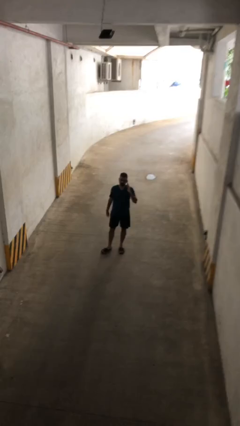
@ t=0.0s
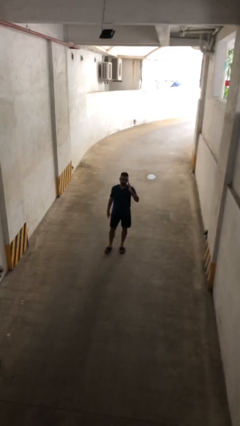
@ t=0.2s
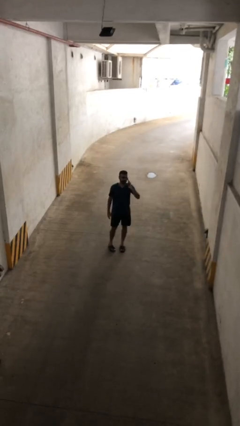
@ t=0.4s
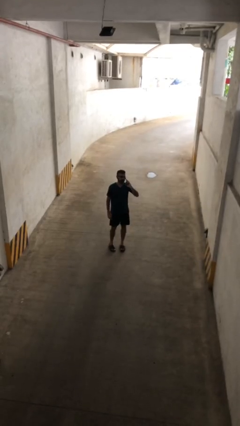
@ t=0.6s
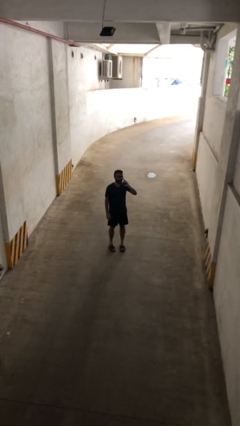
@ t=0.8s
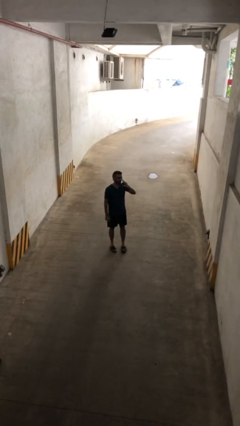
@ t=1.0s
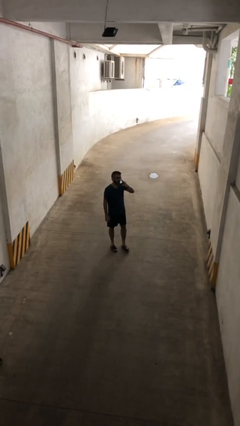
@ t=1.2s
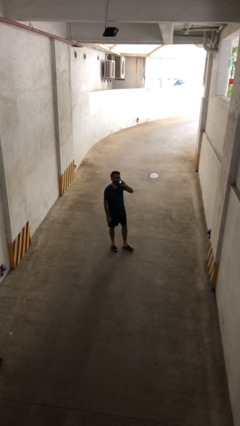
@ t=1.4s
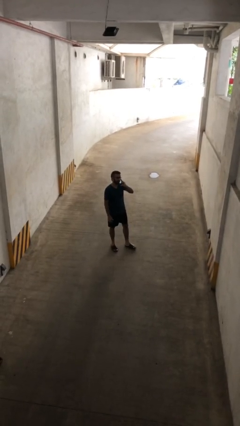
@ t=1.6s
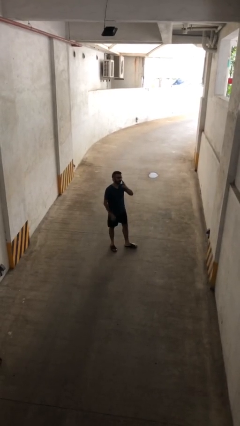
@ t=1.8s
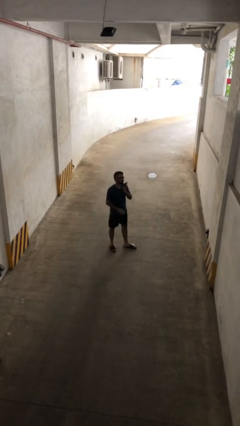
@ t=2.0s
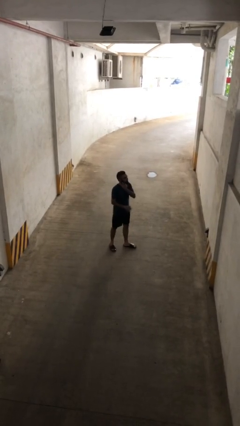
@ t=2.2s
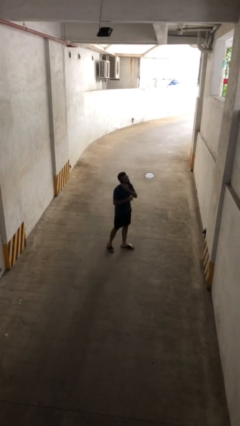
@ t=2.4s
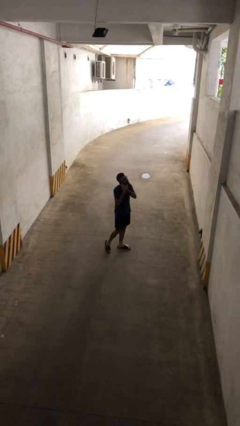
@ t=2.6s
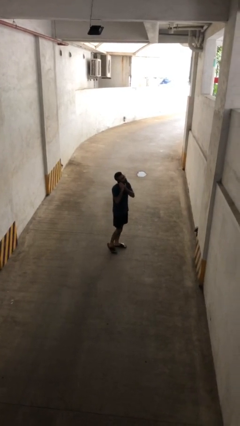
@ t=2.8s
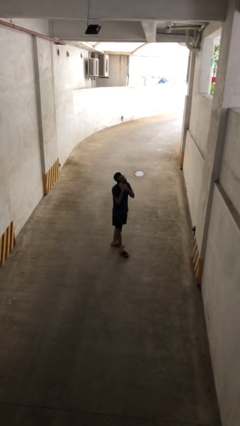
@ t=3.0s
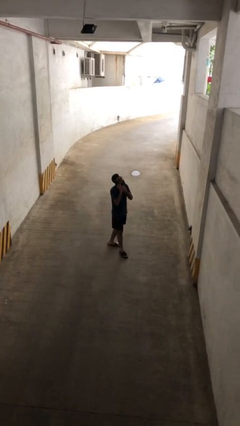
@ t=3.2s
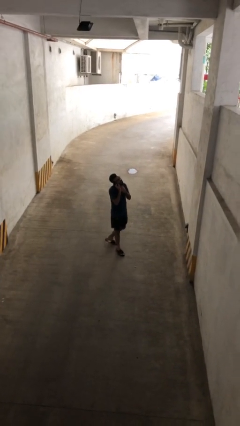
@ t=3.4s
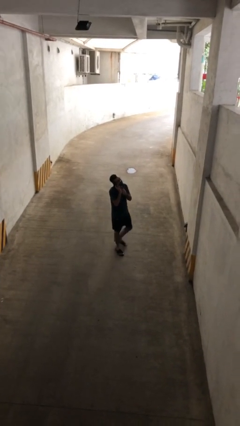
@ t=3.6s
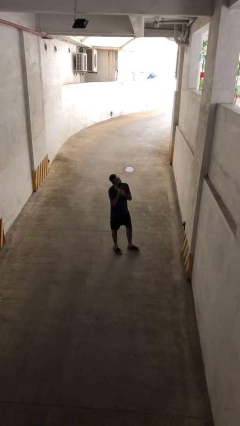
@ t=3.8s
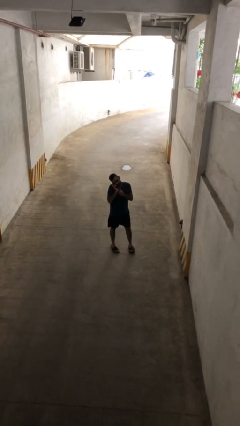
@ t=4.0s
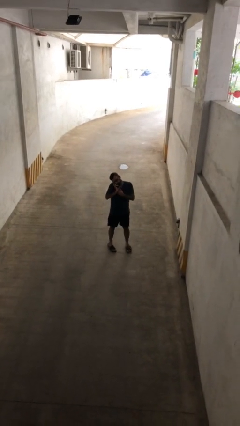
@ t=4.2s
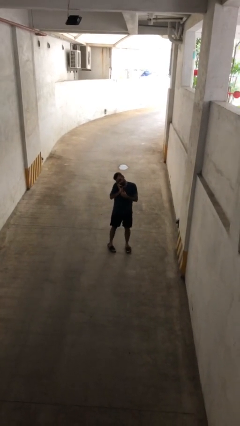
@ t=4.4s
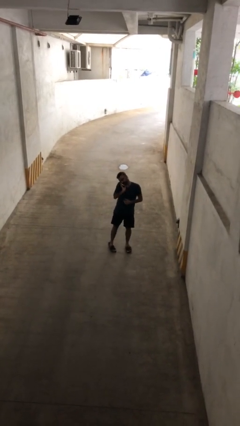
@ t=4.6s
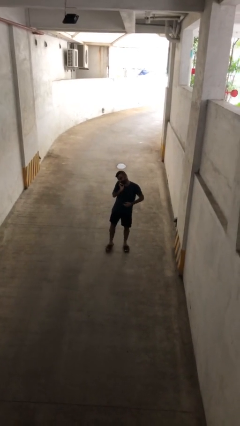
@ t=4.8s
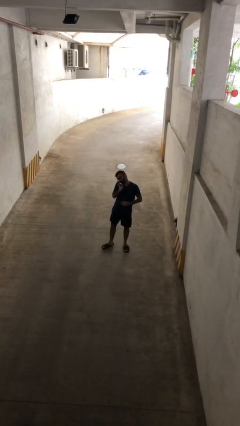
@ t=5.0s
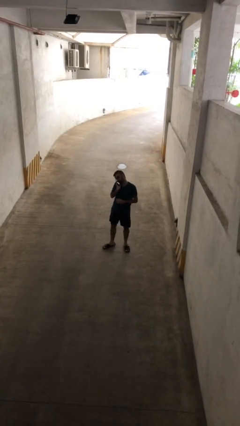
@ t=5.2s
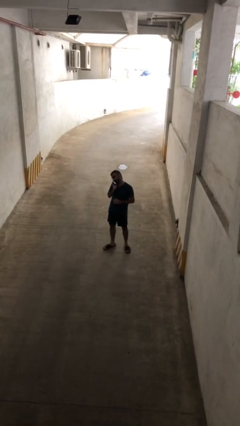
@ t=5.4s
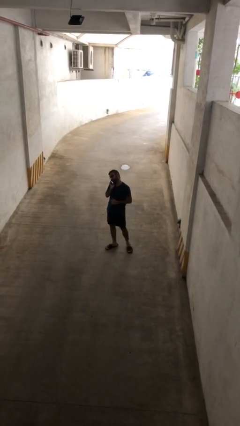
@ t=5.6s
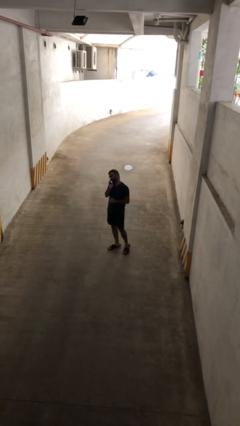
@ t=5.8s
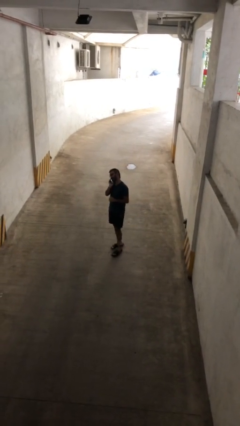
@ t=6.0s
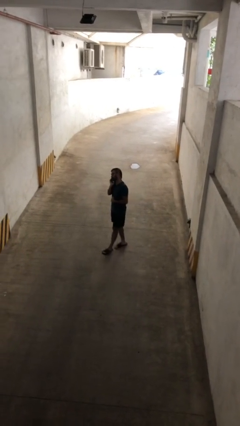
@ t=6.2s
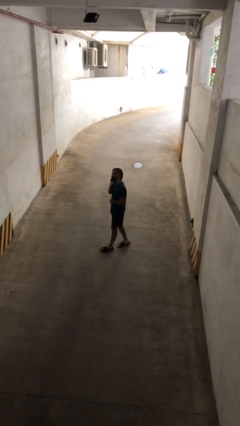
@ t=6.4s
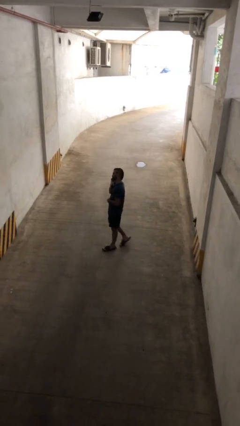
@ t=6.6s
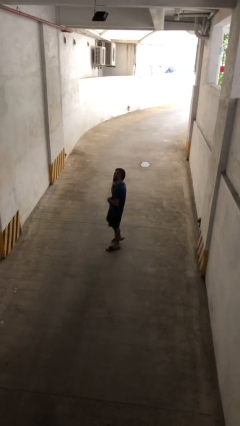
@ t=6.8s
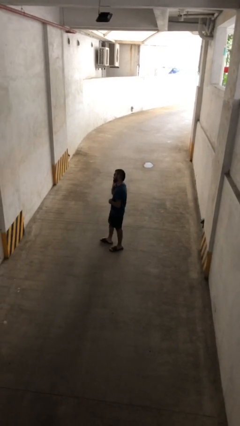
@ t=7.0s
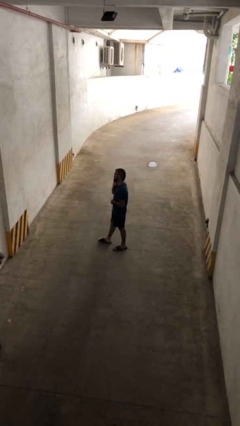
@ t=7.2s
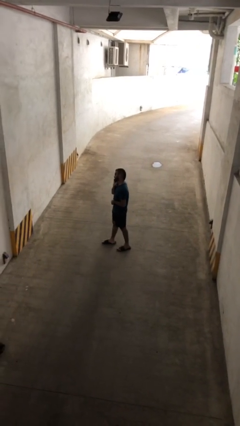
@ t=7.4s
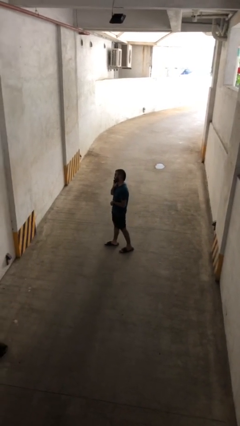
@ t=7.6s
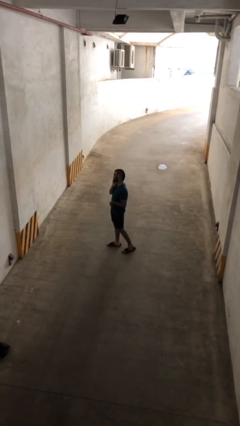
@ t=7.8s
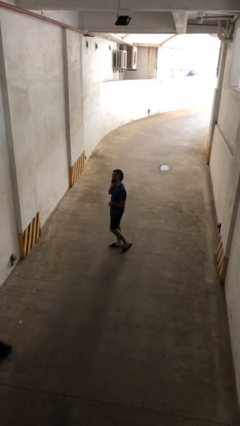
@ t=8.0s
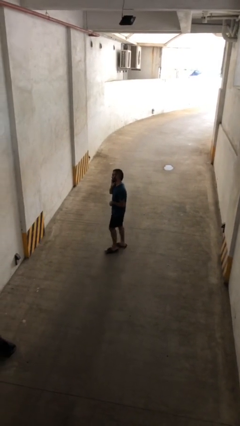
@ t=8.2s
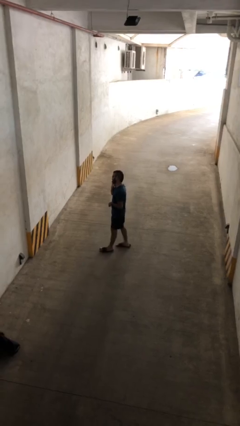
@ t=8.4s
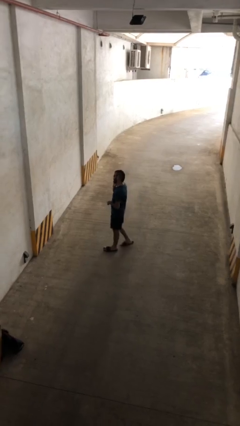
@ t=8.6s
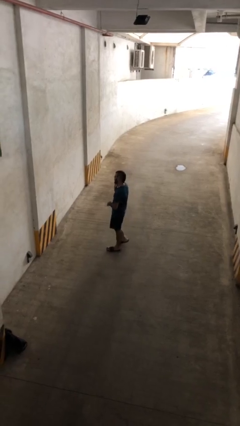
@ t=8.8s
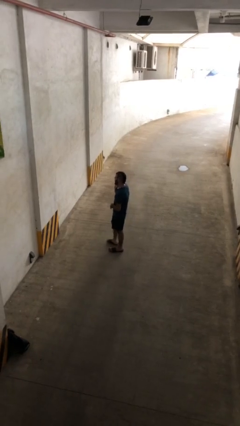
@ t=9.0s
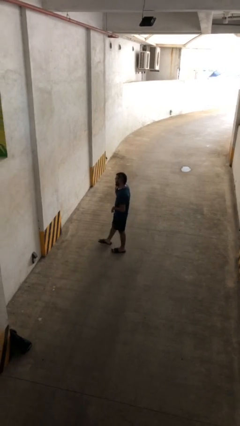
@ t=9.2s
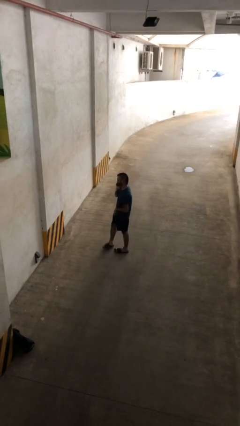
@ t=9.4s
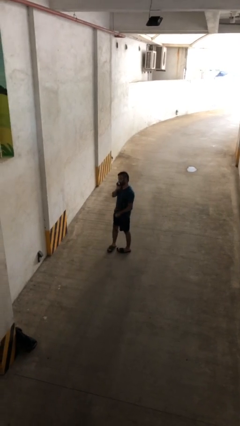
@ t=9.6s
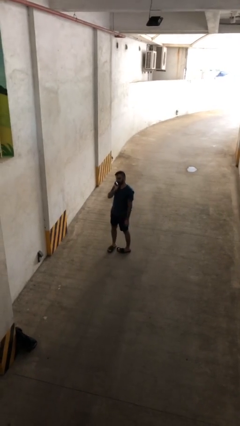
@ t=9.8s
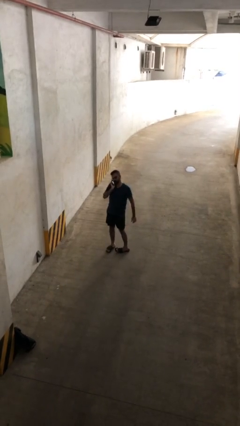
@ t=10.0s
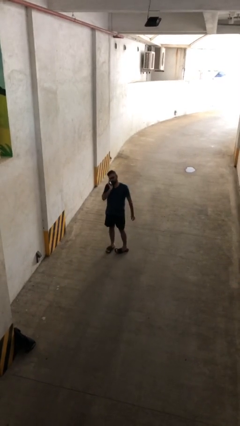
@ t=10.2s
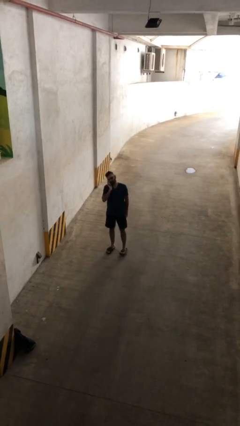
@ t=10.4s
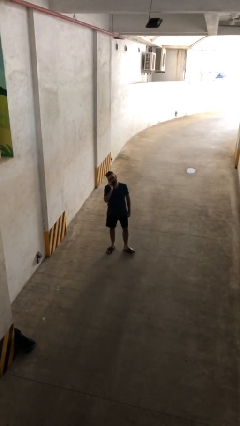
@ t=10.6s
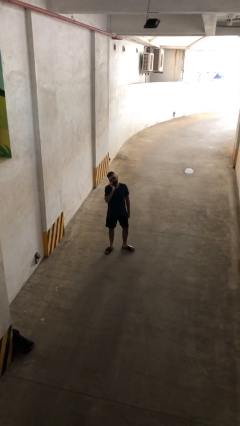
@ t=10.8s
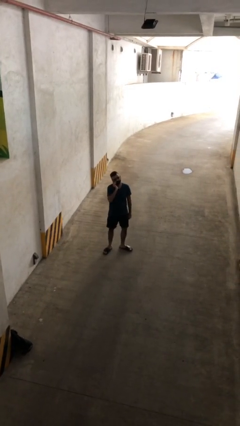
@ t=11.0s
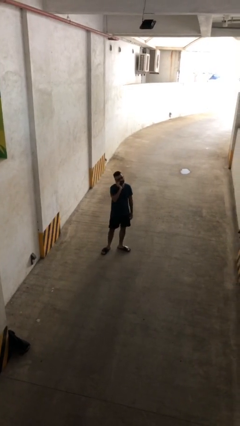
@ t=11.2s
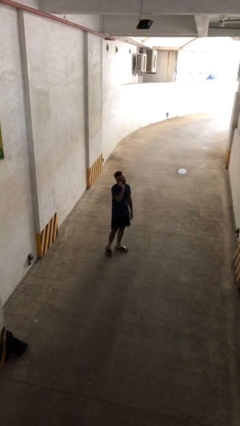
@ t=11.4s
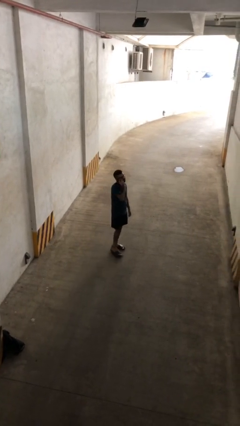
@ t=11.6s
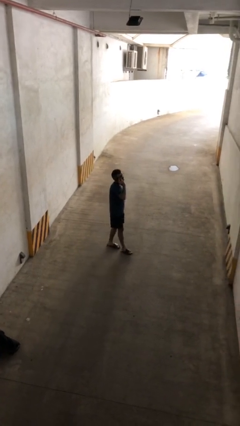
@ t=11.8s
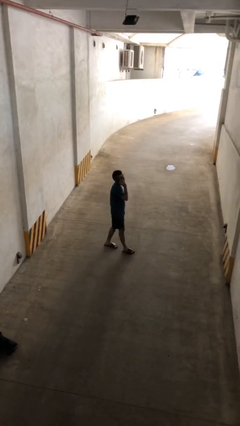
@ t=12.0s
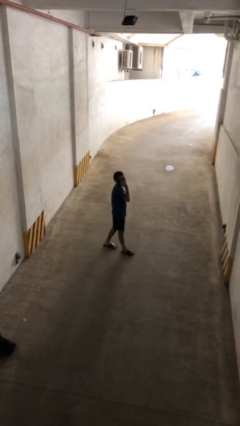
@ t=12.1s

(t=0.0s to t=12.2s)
person talks on phone

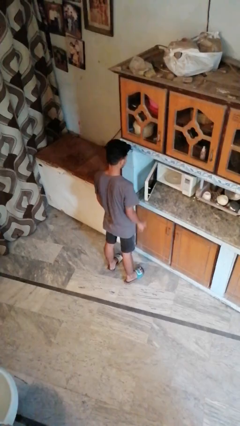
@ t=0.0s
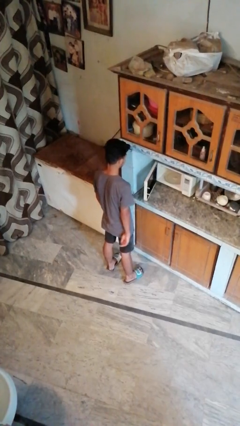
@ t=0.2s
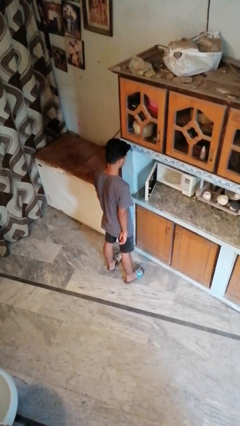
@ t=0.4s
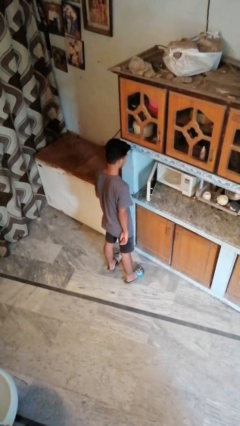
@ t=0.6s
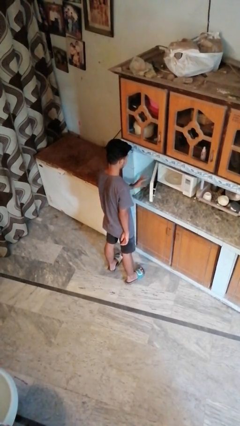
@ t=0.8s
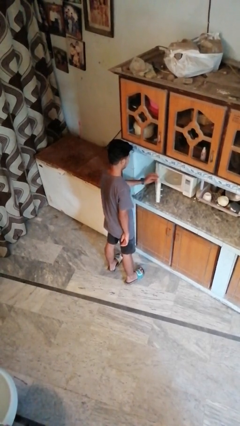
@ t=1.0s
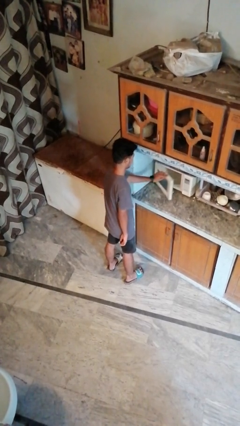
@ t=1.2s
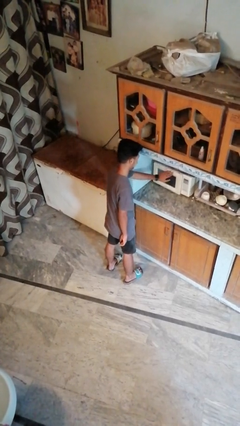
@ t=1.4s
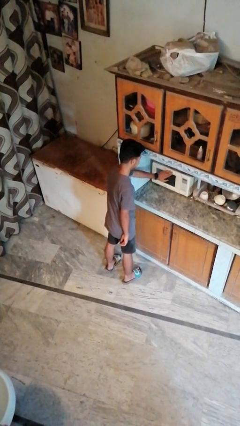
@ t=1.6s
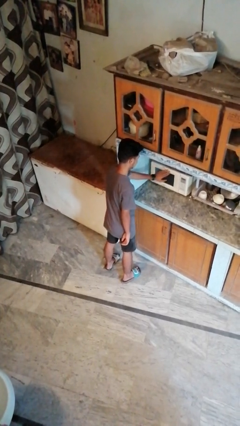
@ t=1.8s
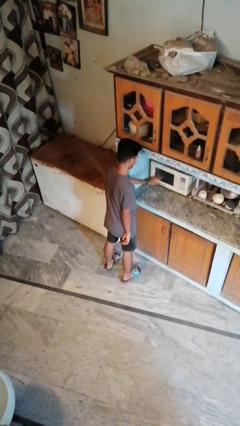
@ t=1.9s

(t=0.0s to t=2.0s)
person closes oven door

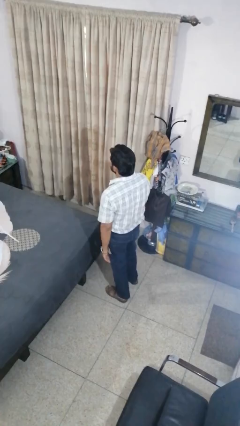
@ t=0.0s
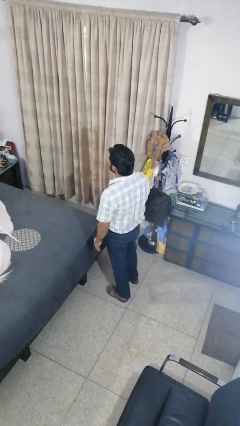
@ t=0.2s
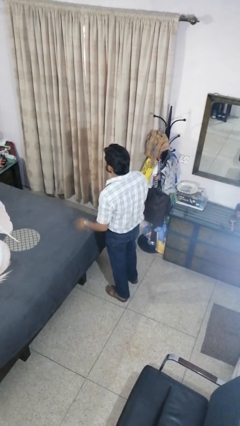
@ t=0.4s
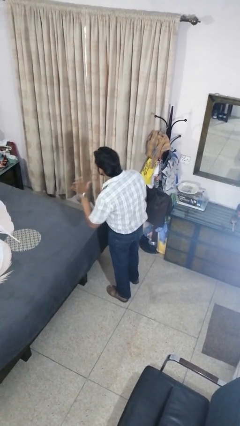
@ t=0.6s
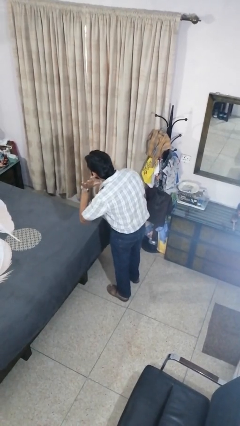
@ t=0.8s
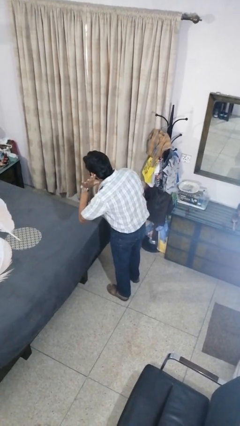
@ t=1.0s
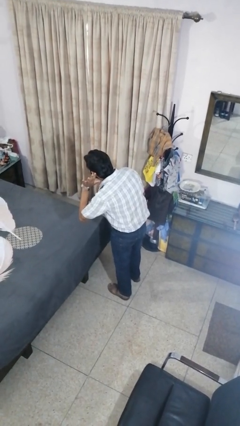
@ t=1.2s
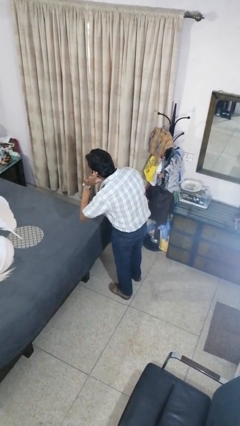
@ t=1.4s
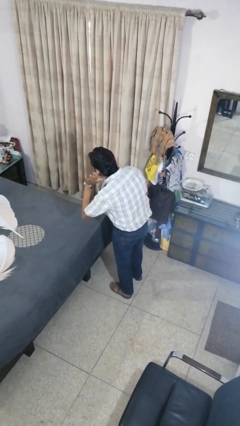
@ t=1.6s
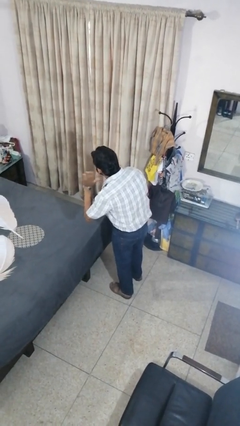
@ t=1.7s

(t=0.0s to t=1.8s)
person gestures listen closely

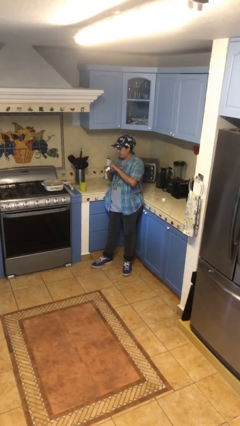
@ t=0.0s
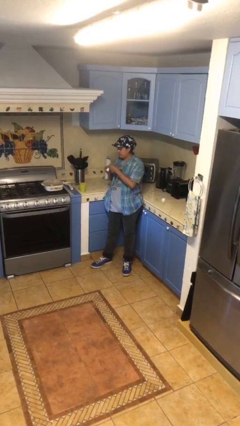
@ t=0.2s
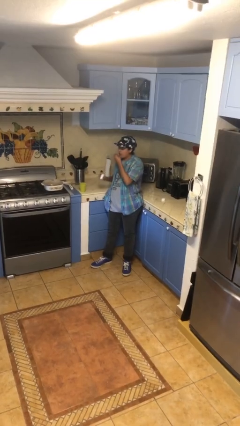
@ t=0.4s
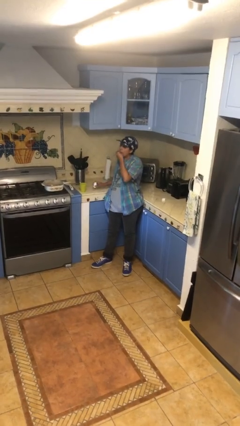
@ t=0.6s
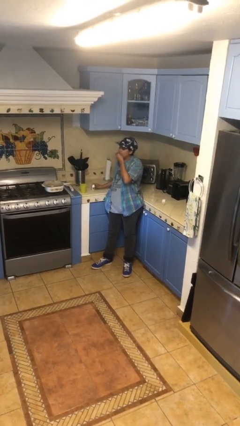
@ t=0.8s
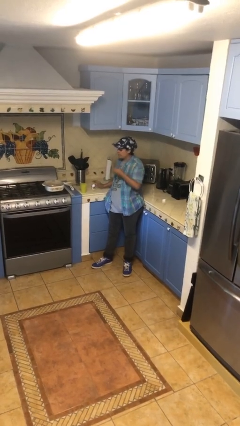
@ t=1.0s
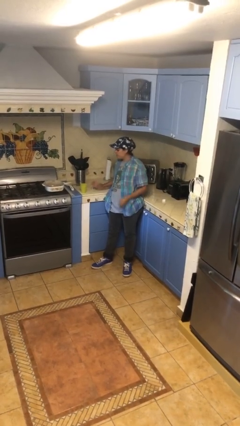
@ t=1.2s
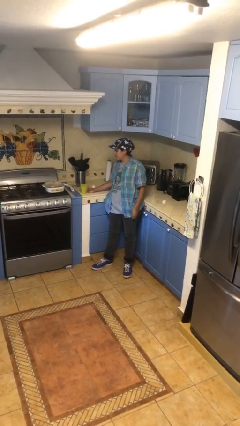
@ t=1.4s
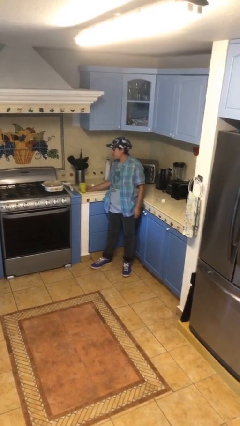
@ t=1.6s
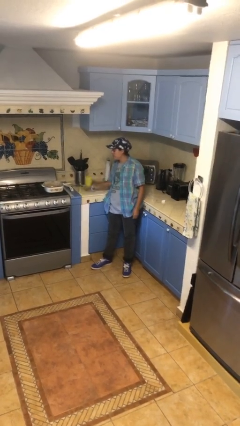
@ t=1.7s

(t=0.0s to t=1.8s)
person takes medicine pills
